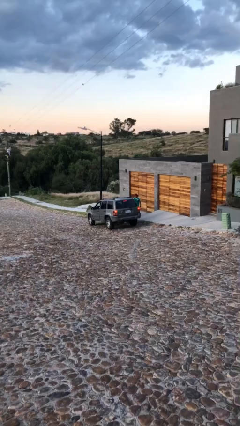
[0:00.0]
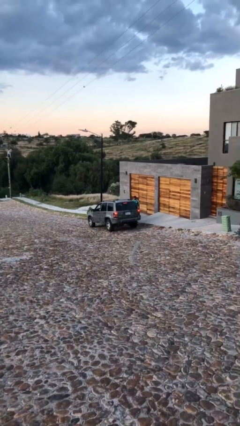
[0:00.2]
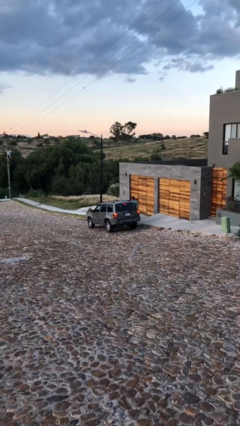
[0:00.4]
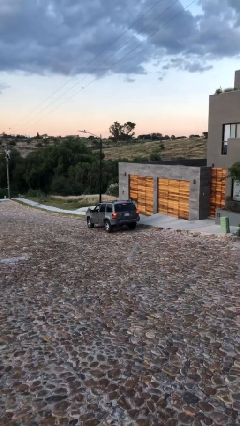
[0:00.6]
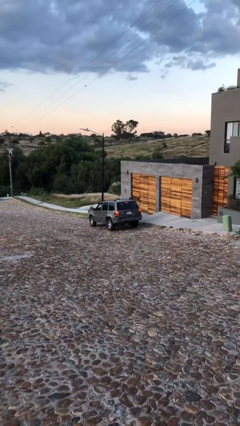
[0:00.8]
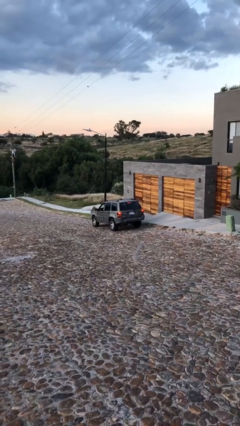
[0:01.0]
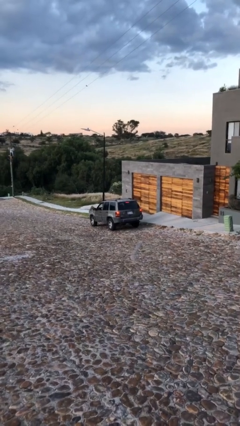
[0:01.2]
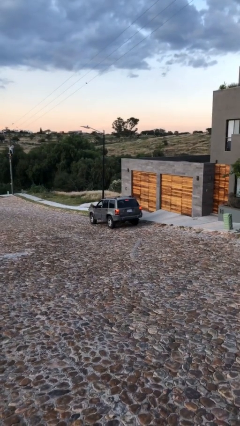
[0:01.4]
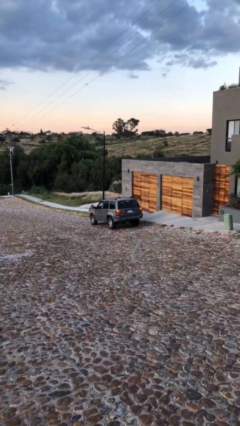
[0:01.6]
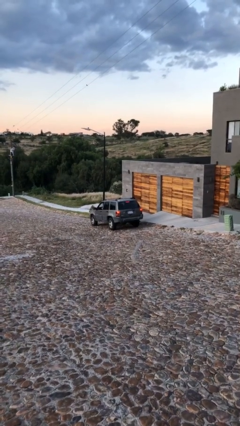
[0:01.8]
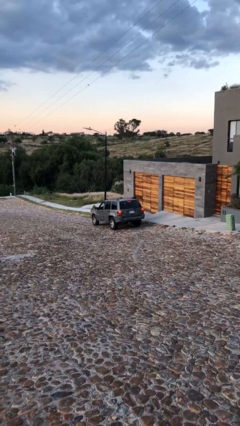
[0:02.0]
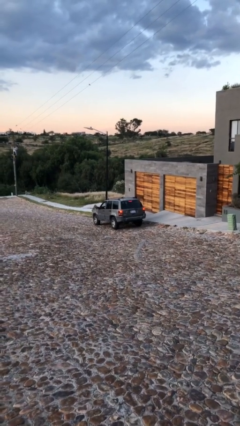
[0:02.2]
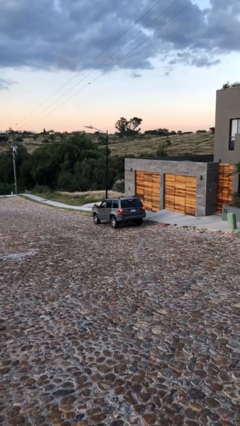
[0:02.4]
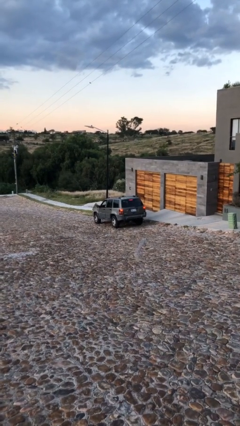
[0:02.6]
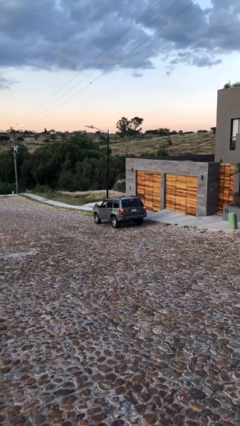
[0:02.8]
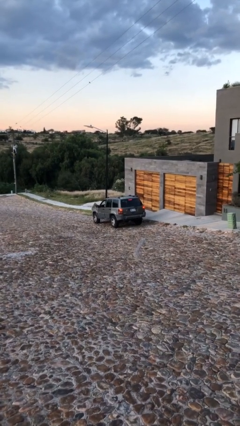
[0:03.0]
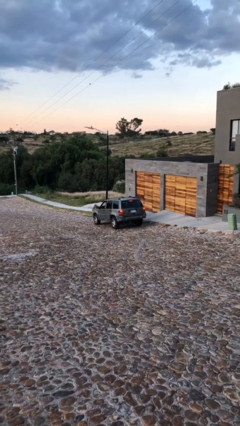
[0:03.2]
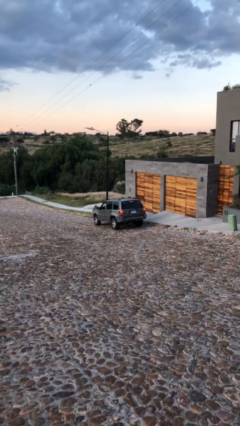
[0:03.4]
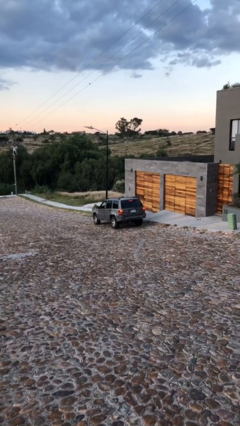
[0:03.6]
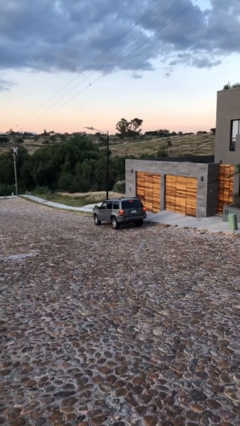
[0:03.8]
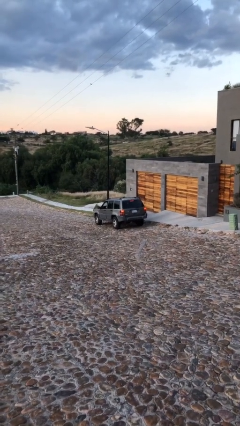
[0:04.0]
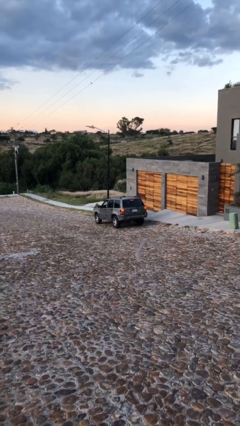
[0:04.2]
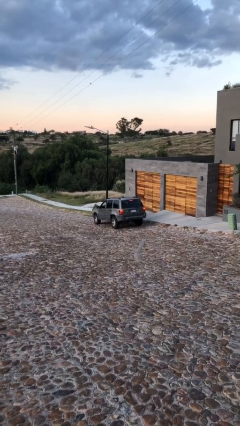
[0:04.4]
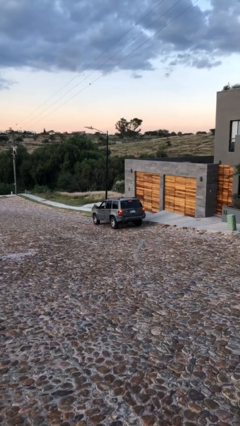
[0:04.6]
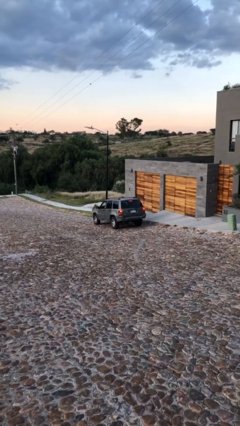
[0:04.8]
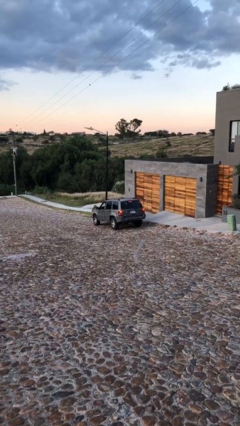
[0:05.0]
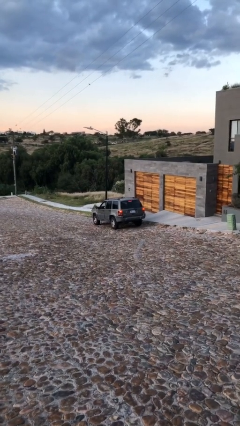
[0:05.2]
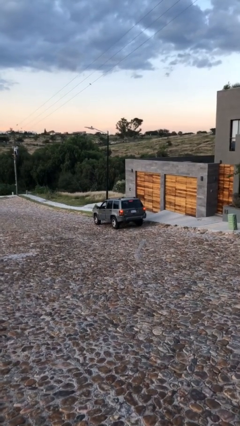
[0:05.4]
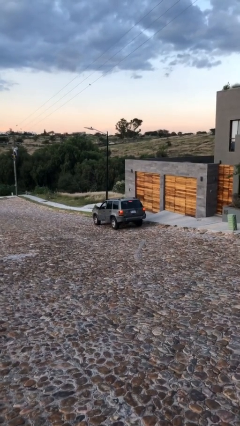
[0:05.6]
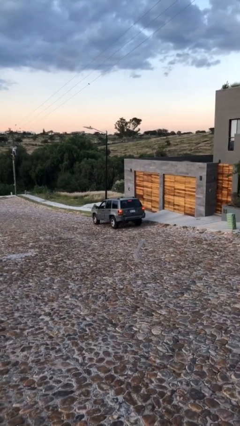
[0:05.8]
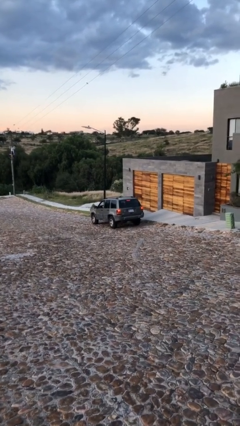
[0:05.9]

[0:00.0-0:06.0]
car picks up person

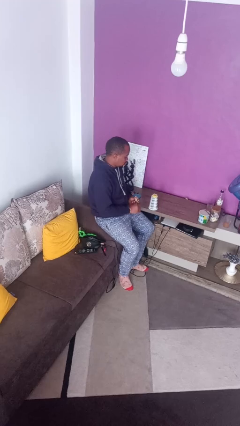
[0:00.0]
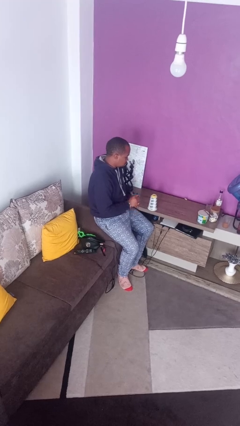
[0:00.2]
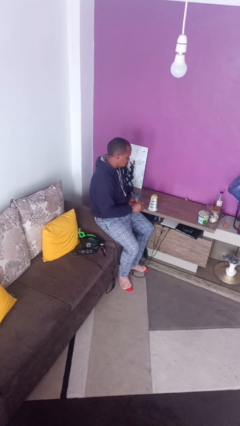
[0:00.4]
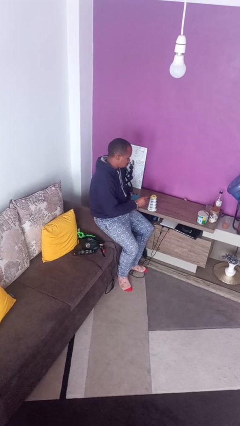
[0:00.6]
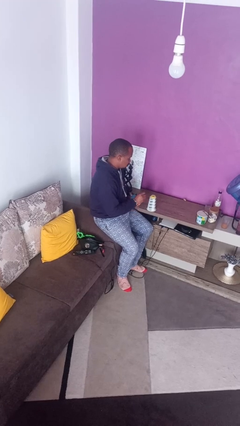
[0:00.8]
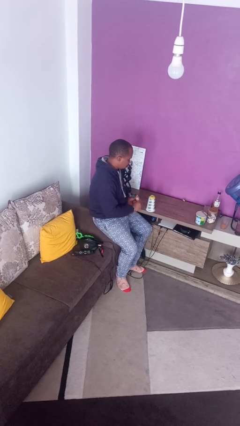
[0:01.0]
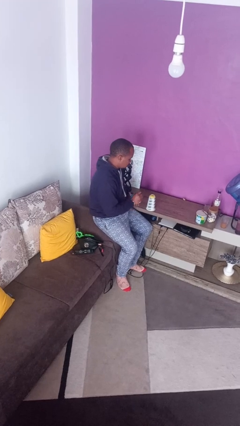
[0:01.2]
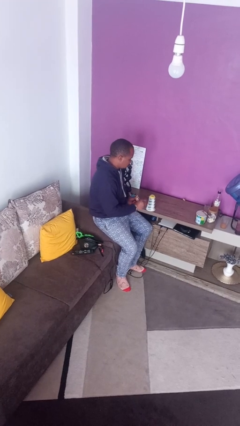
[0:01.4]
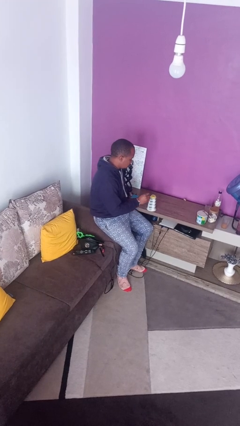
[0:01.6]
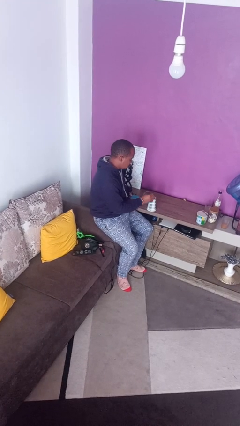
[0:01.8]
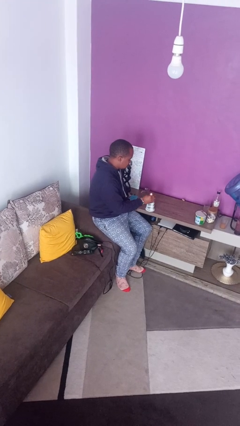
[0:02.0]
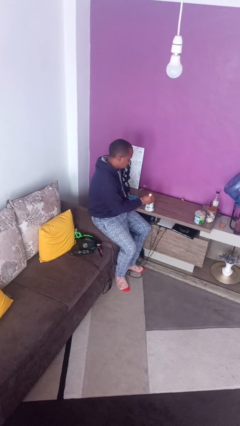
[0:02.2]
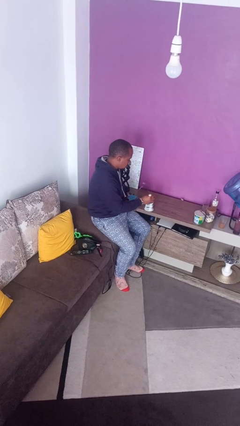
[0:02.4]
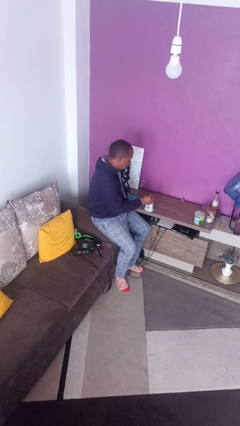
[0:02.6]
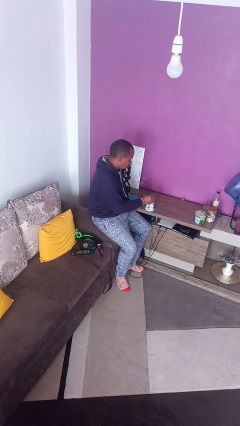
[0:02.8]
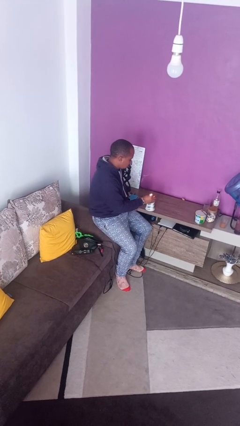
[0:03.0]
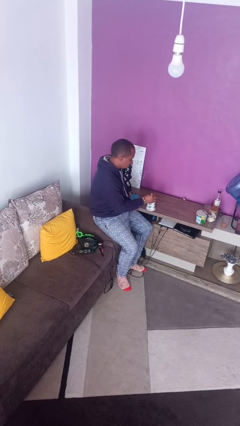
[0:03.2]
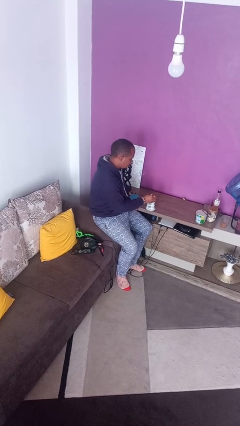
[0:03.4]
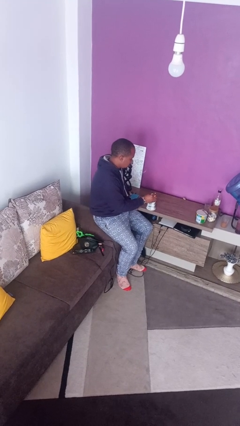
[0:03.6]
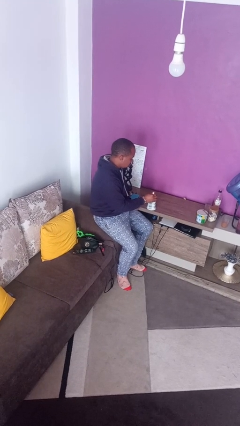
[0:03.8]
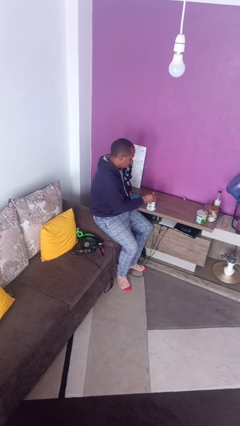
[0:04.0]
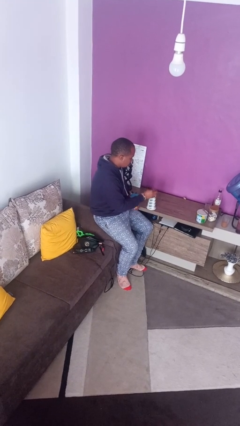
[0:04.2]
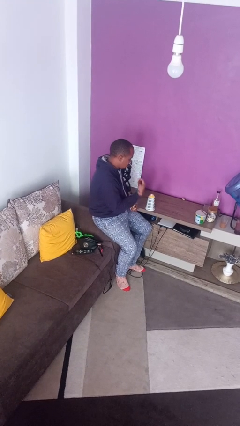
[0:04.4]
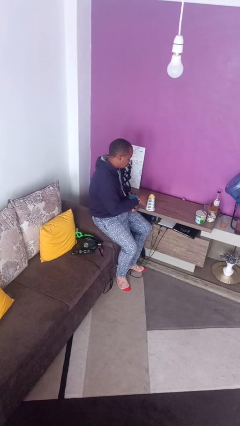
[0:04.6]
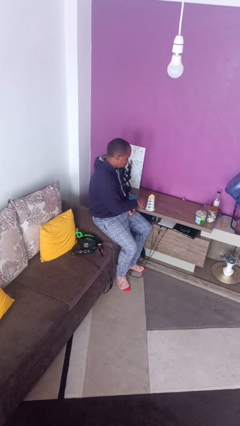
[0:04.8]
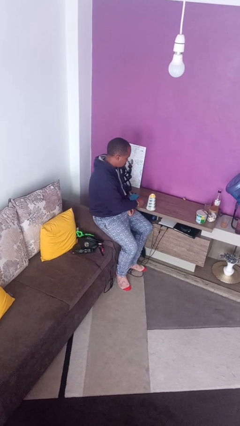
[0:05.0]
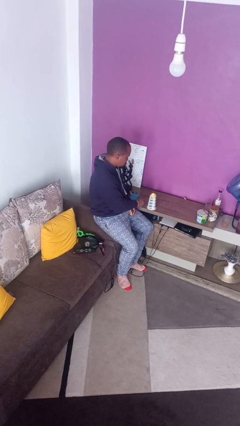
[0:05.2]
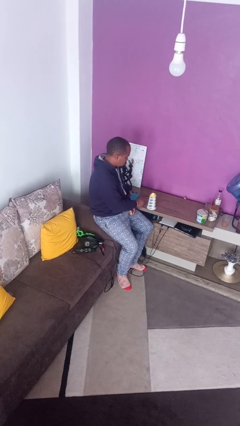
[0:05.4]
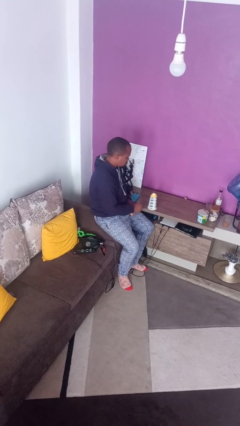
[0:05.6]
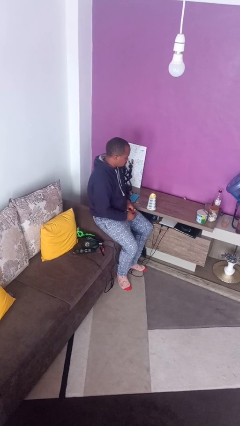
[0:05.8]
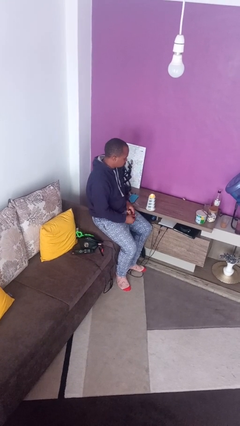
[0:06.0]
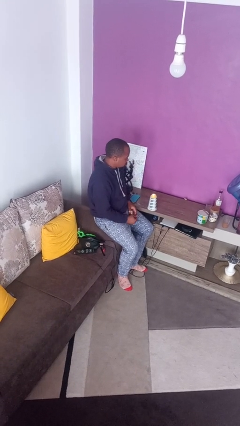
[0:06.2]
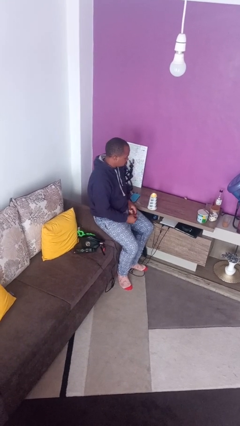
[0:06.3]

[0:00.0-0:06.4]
person lights candle

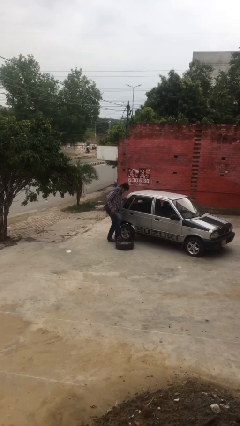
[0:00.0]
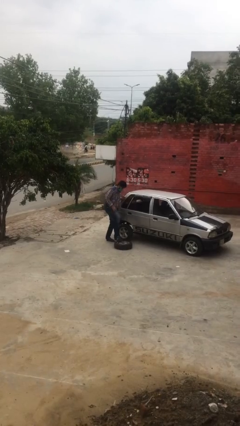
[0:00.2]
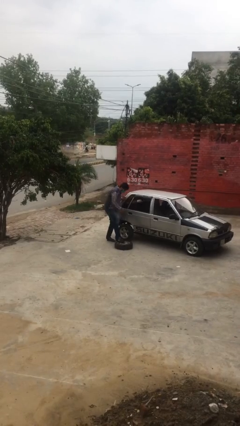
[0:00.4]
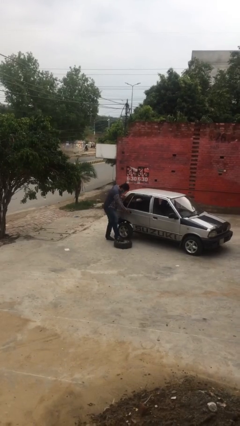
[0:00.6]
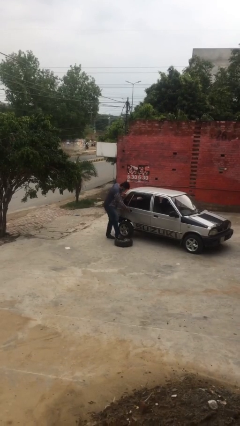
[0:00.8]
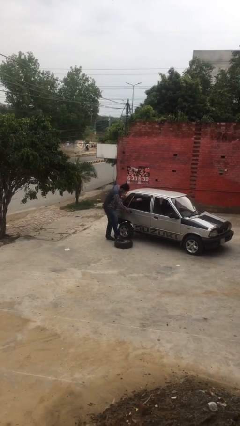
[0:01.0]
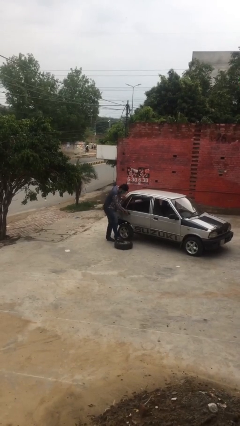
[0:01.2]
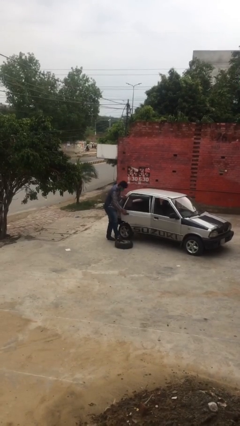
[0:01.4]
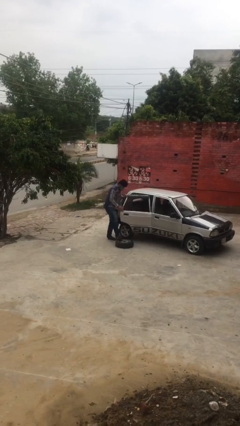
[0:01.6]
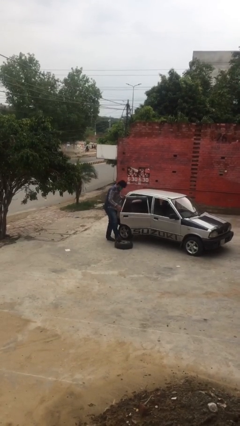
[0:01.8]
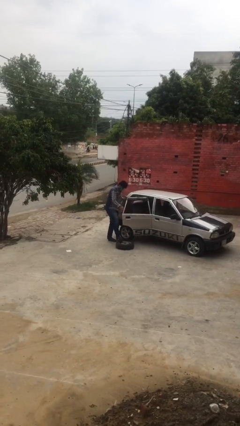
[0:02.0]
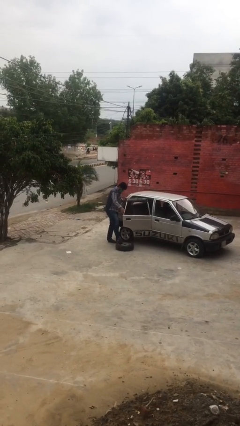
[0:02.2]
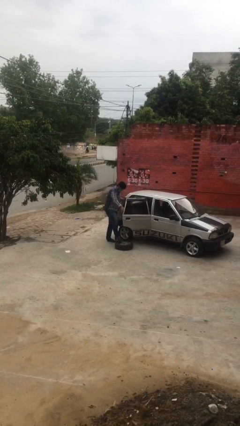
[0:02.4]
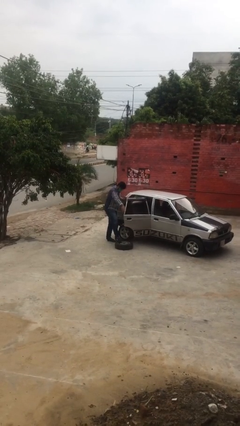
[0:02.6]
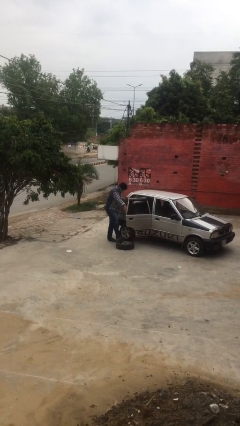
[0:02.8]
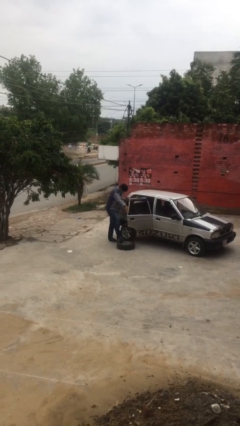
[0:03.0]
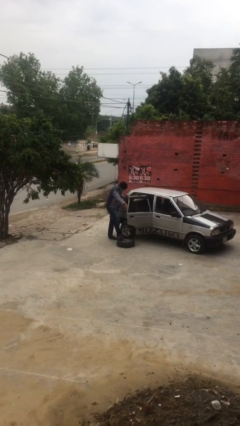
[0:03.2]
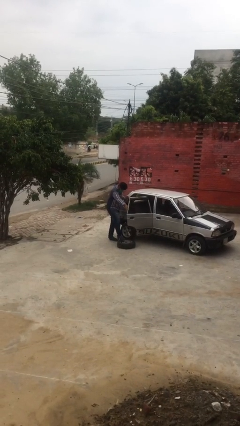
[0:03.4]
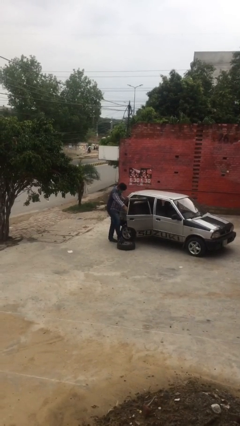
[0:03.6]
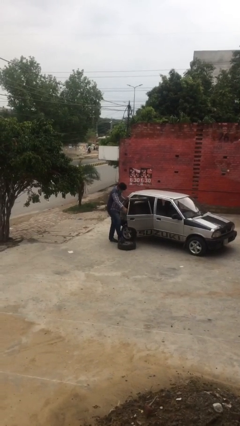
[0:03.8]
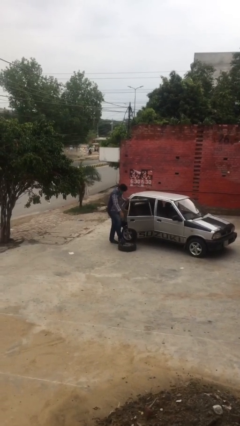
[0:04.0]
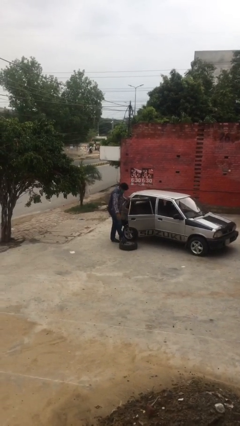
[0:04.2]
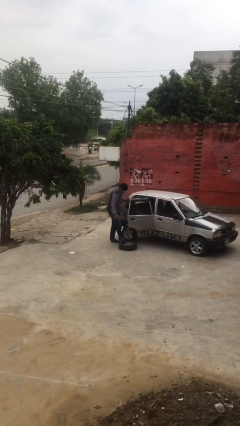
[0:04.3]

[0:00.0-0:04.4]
person opens car door

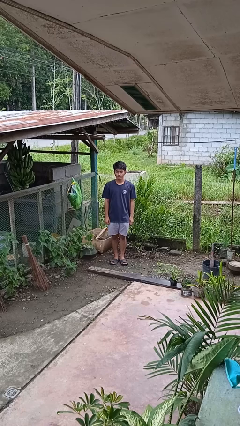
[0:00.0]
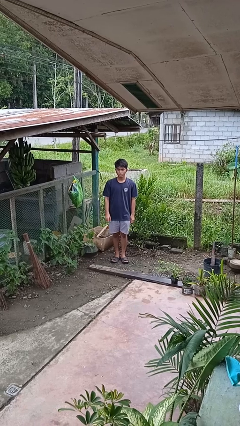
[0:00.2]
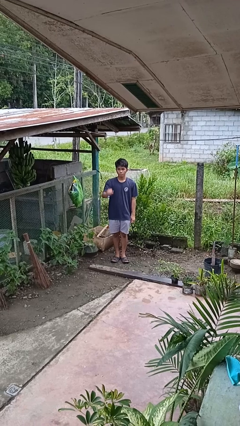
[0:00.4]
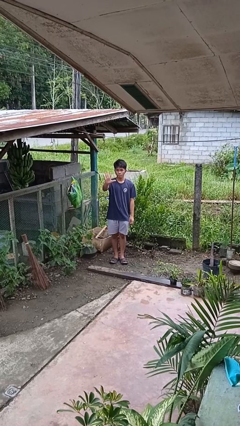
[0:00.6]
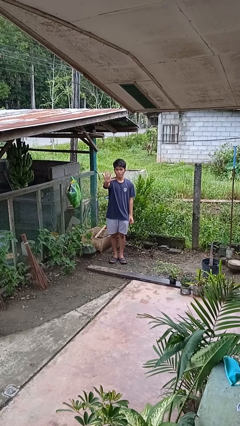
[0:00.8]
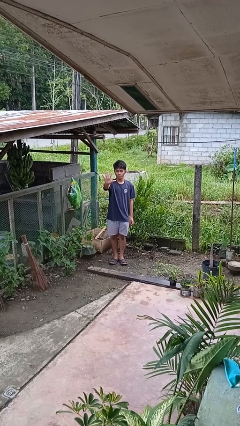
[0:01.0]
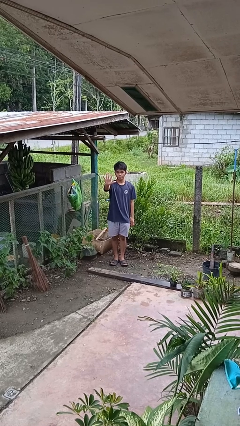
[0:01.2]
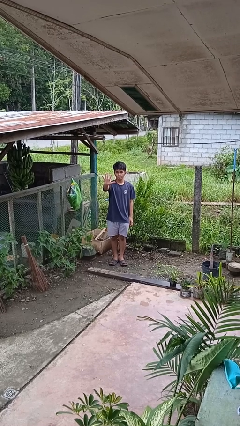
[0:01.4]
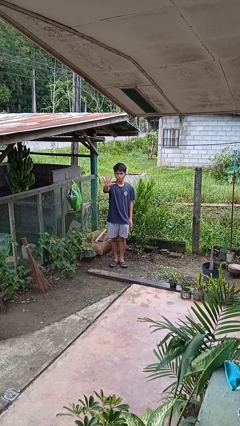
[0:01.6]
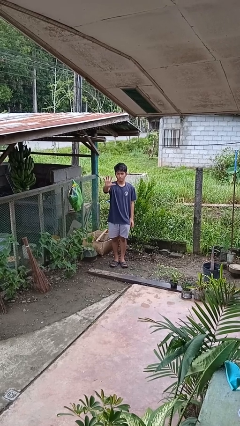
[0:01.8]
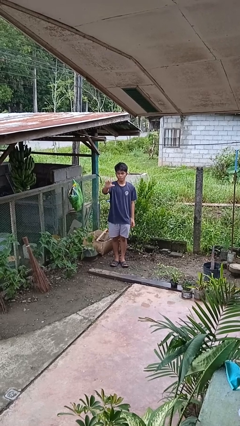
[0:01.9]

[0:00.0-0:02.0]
person gestures number five
